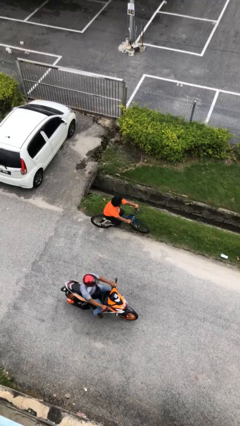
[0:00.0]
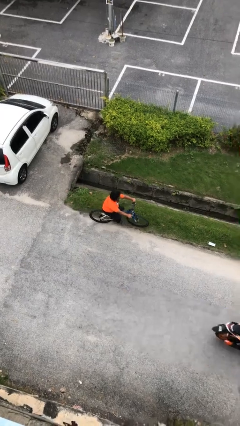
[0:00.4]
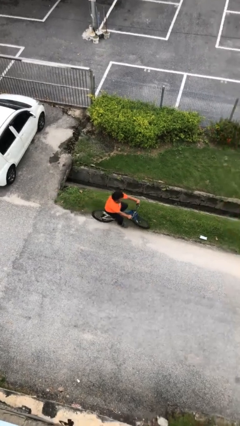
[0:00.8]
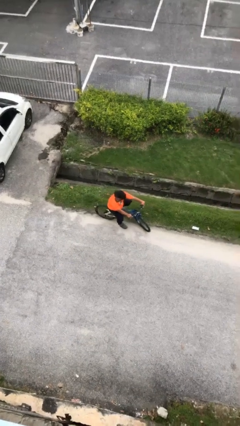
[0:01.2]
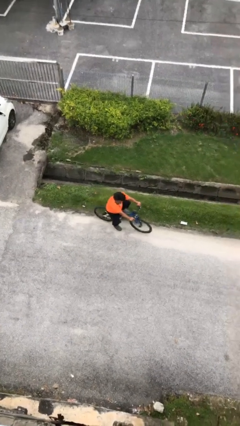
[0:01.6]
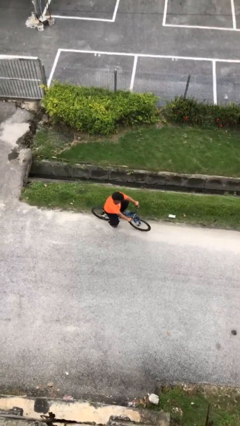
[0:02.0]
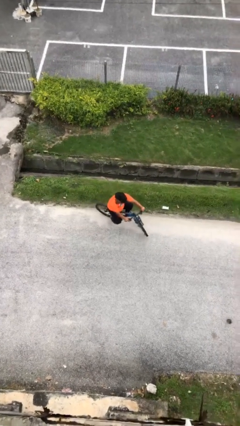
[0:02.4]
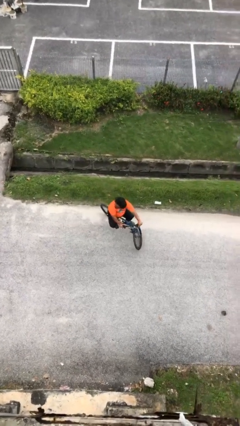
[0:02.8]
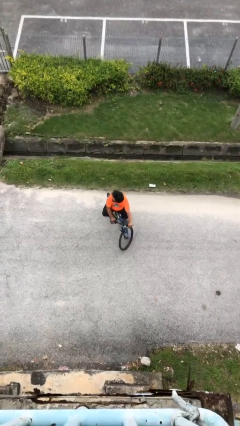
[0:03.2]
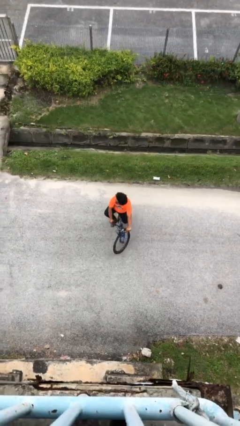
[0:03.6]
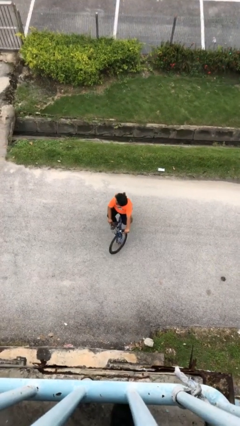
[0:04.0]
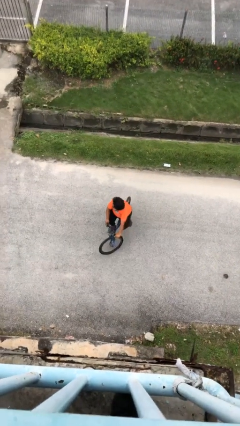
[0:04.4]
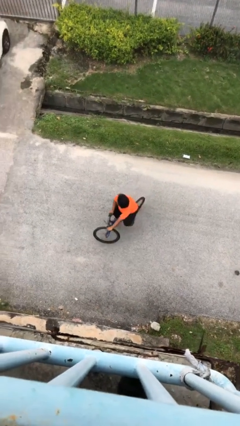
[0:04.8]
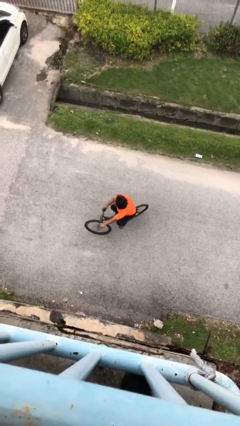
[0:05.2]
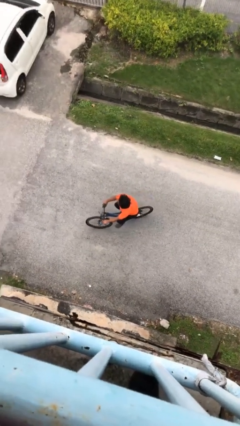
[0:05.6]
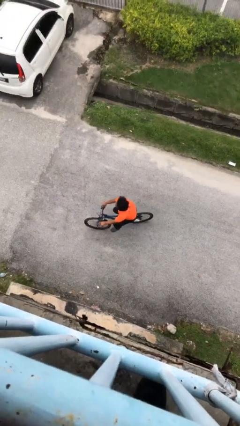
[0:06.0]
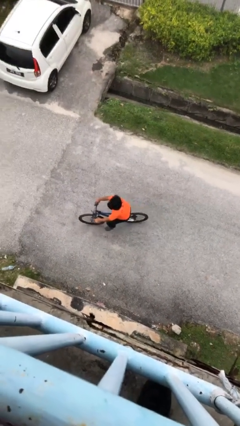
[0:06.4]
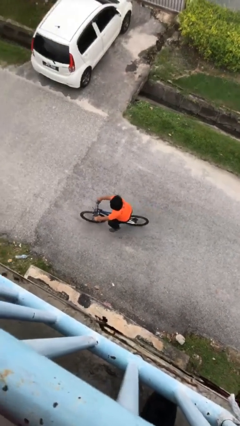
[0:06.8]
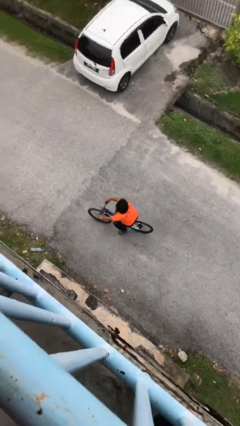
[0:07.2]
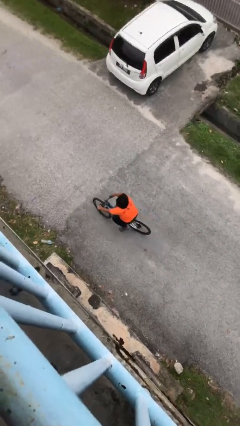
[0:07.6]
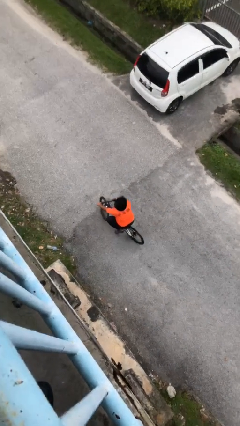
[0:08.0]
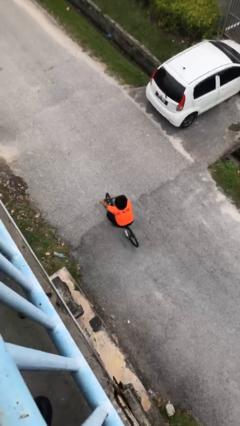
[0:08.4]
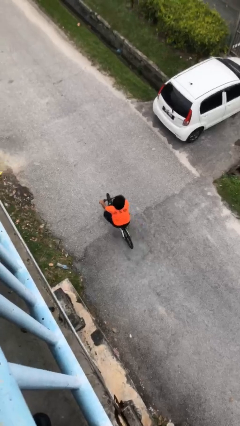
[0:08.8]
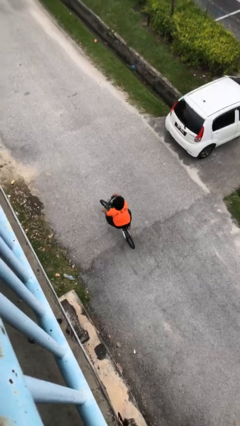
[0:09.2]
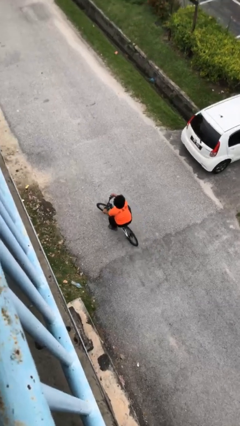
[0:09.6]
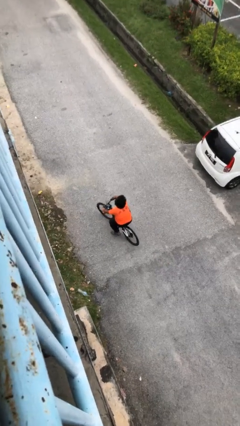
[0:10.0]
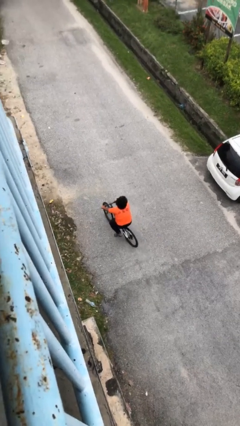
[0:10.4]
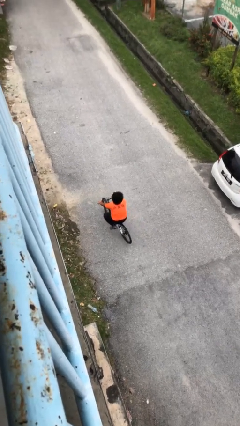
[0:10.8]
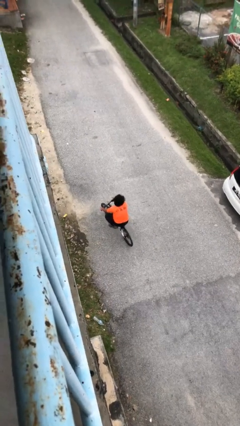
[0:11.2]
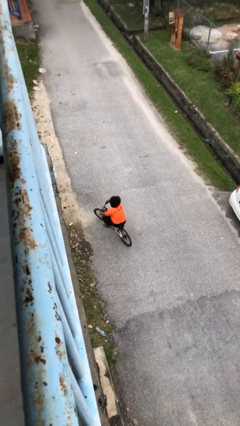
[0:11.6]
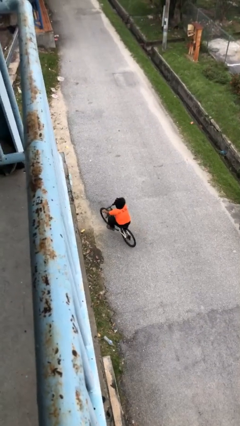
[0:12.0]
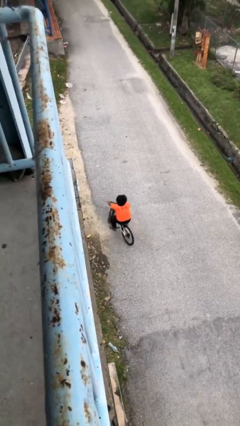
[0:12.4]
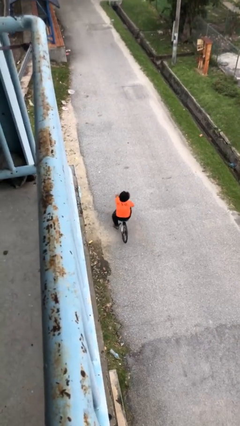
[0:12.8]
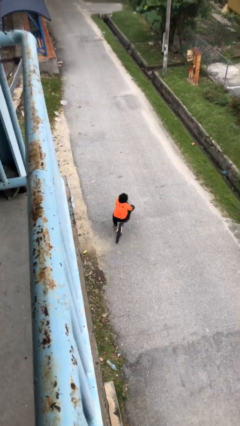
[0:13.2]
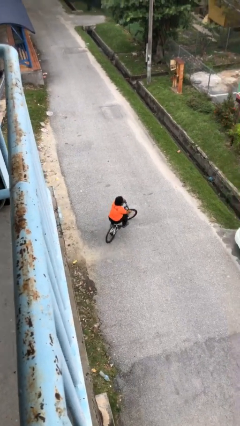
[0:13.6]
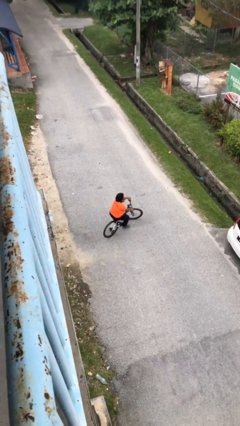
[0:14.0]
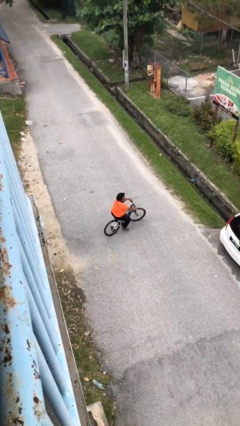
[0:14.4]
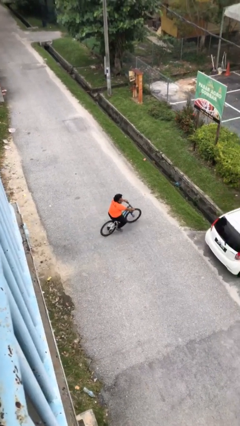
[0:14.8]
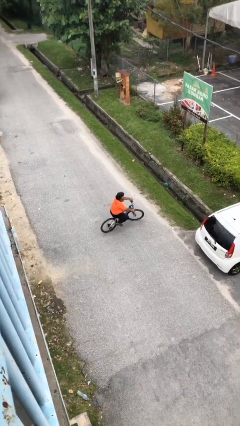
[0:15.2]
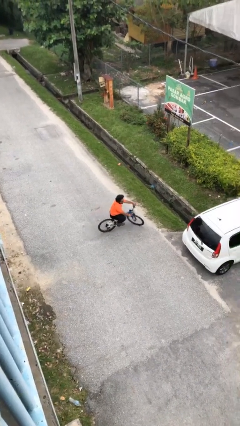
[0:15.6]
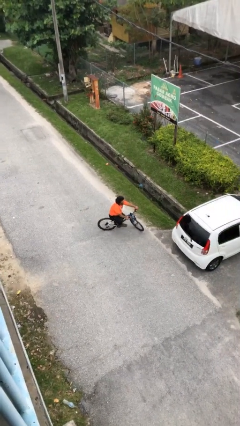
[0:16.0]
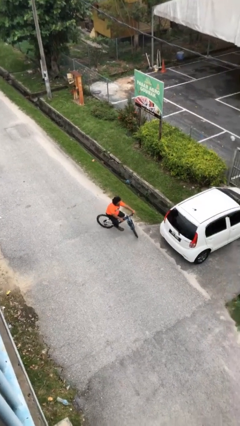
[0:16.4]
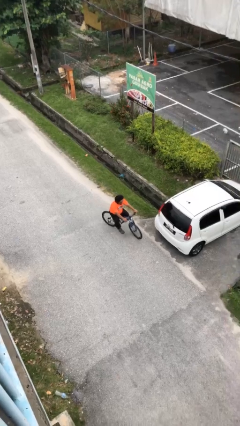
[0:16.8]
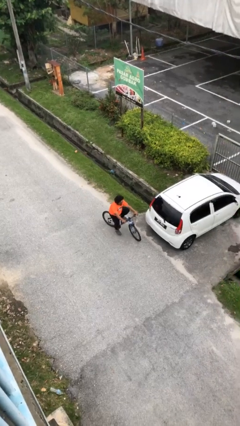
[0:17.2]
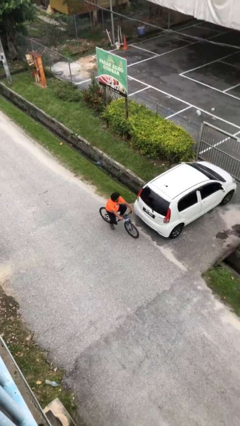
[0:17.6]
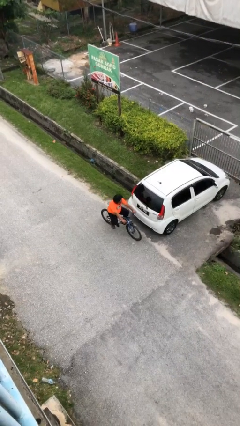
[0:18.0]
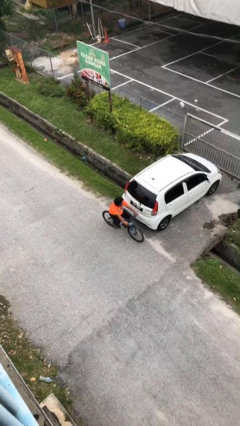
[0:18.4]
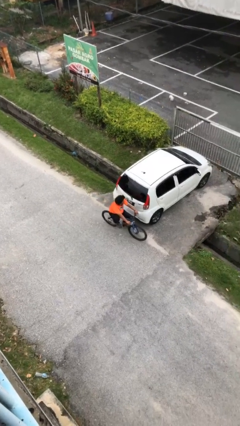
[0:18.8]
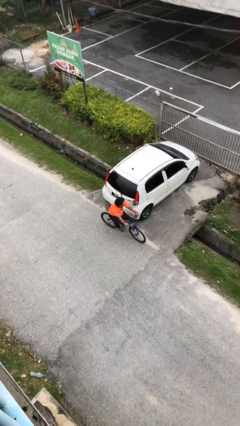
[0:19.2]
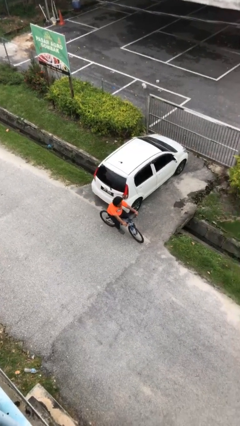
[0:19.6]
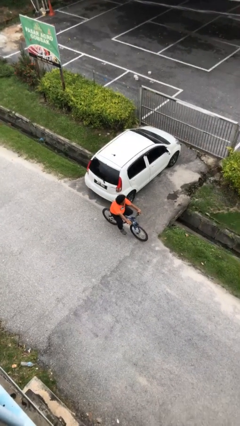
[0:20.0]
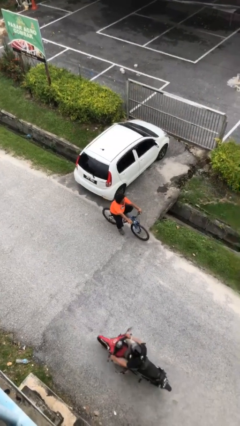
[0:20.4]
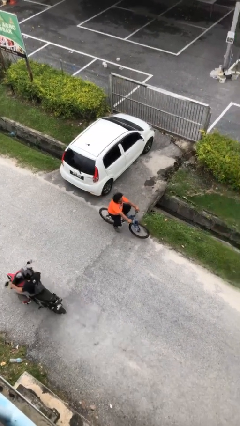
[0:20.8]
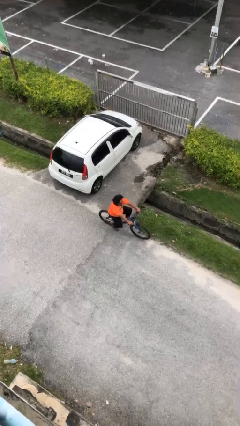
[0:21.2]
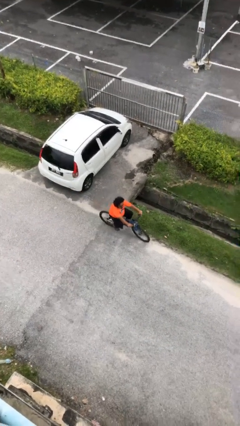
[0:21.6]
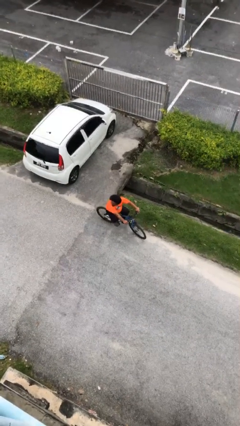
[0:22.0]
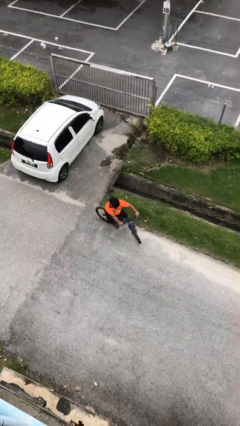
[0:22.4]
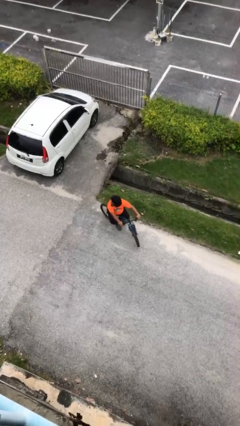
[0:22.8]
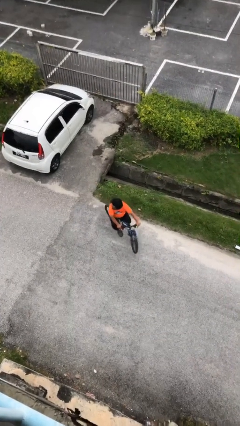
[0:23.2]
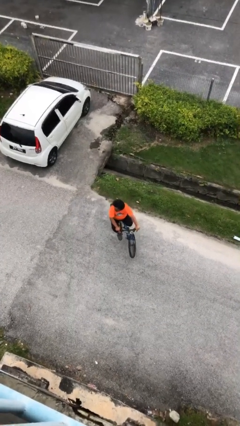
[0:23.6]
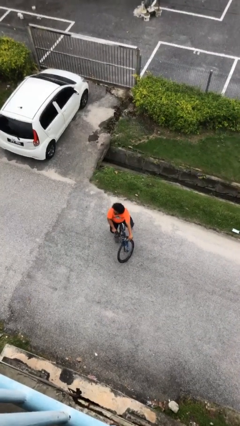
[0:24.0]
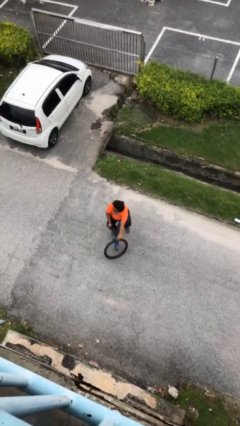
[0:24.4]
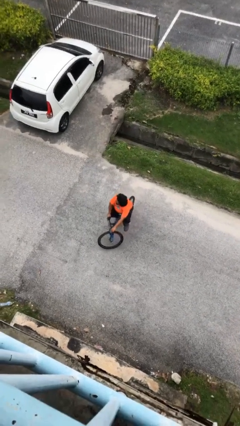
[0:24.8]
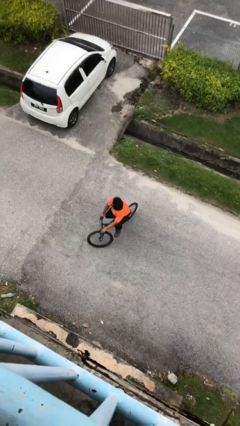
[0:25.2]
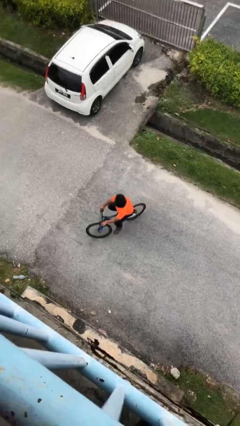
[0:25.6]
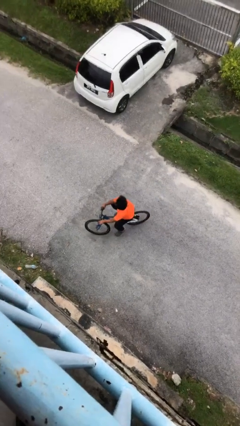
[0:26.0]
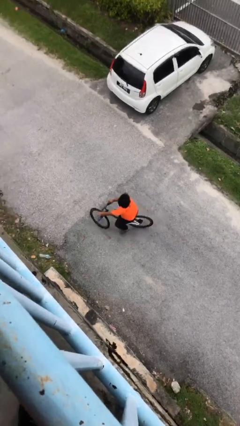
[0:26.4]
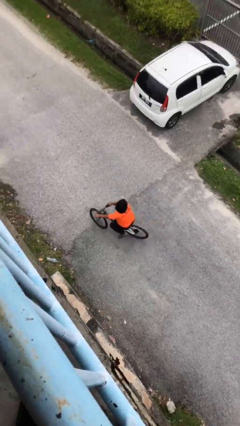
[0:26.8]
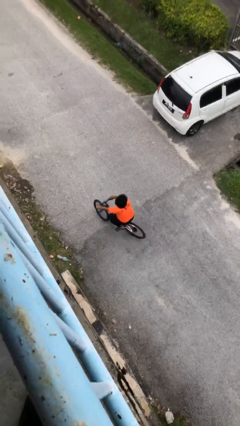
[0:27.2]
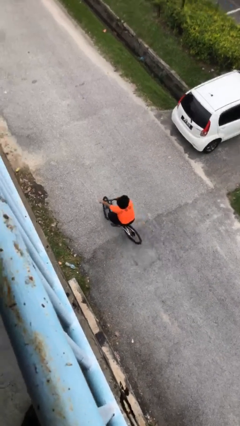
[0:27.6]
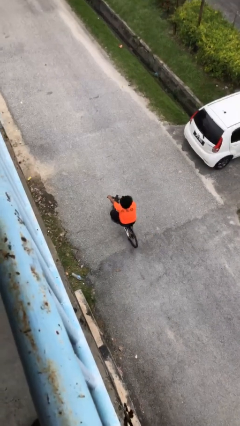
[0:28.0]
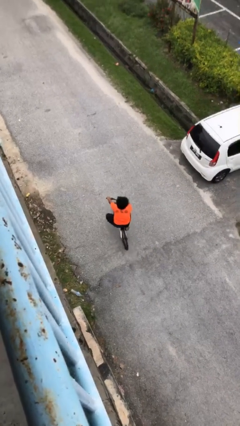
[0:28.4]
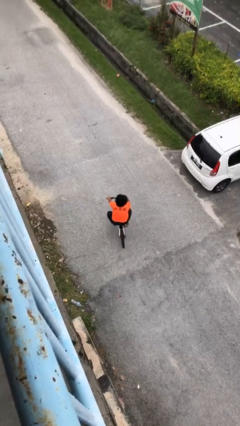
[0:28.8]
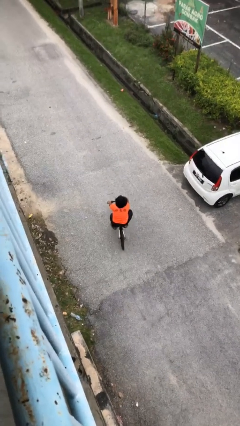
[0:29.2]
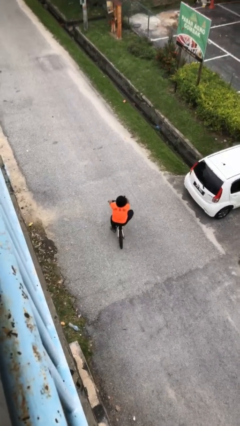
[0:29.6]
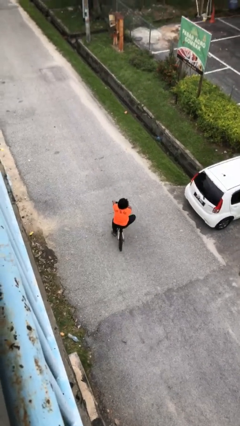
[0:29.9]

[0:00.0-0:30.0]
person rides bicycle

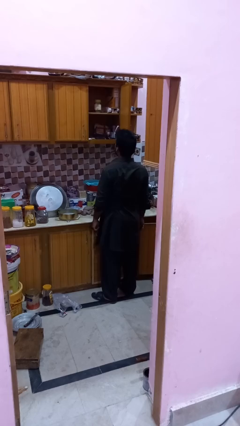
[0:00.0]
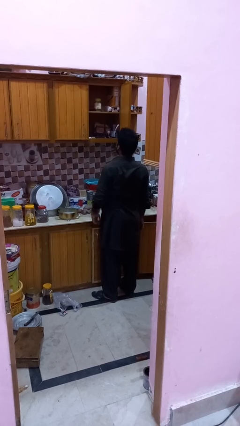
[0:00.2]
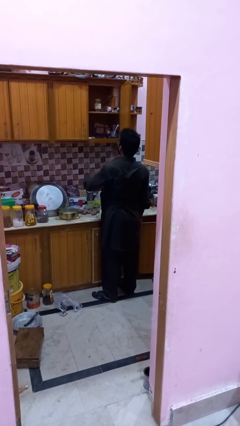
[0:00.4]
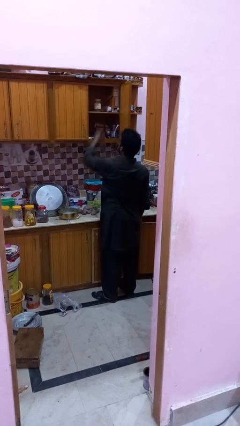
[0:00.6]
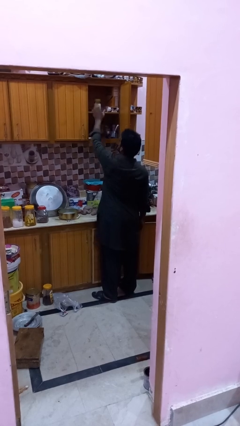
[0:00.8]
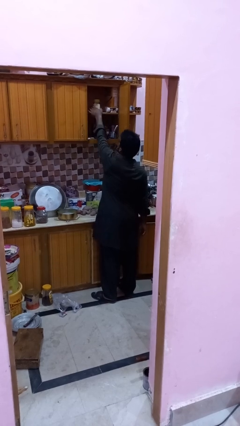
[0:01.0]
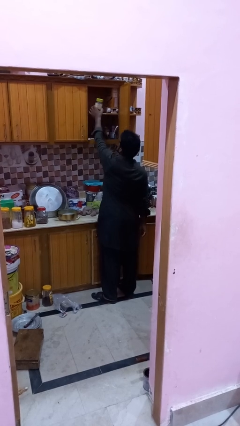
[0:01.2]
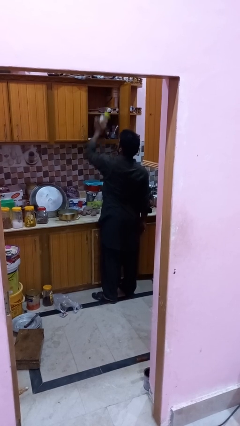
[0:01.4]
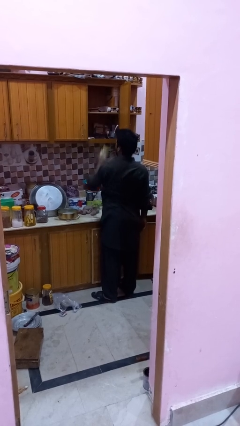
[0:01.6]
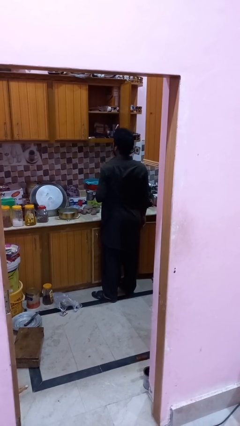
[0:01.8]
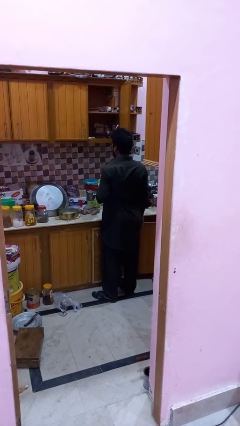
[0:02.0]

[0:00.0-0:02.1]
person takes object from cabinet

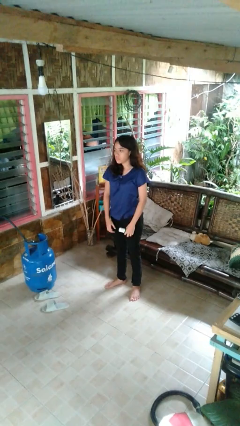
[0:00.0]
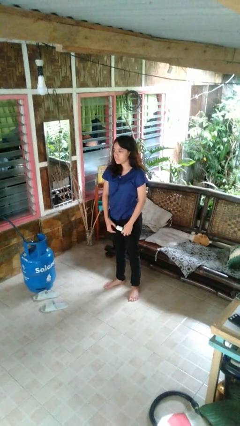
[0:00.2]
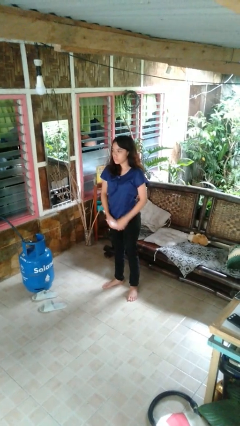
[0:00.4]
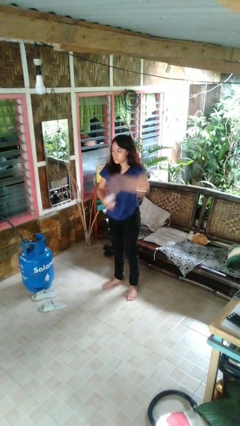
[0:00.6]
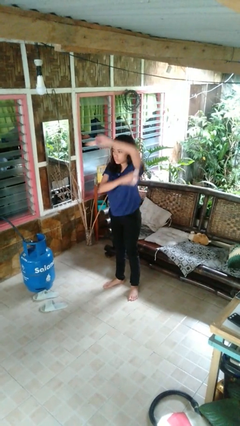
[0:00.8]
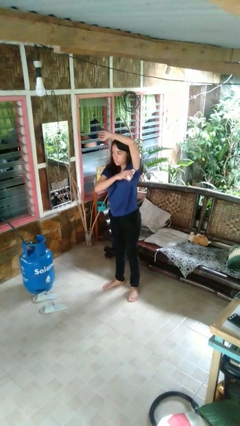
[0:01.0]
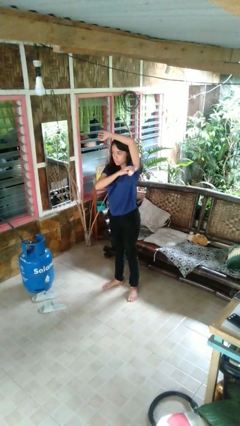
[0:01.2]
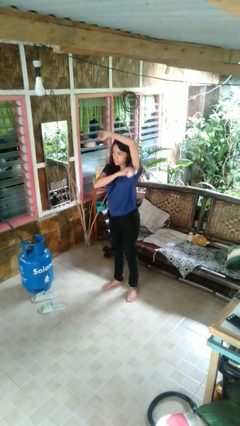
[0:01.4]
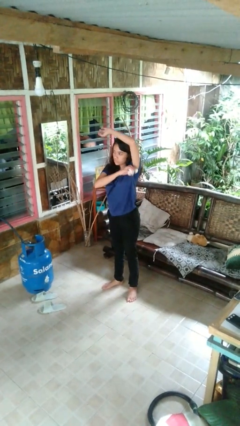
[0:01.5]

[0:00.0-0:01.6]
person applies deodorant
